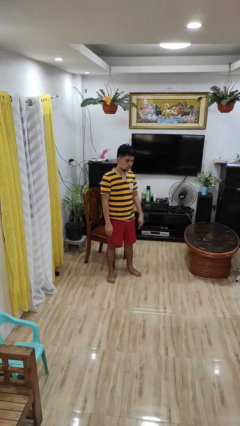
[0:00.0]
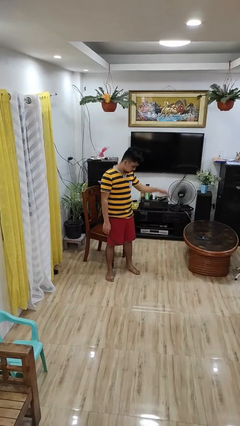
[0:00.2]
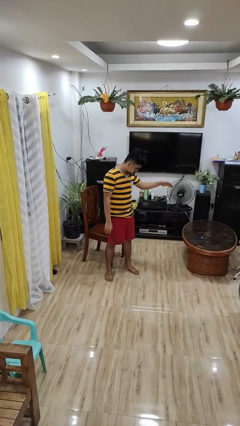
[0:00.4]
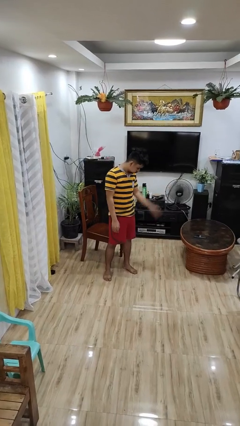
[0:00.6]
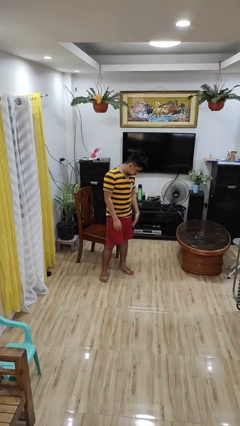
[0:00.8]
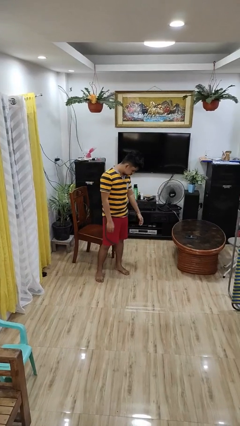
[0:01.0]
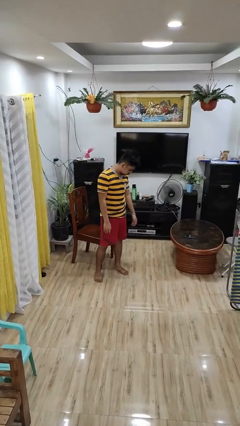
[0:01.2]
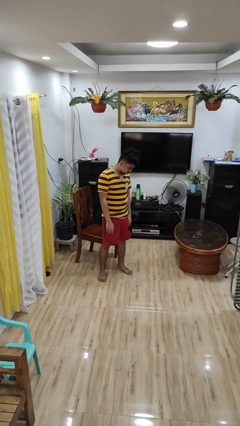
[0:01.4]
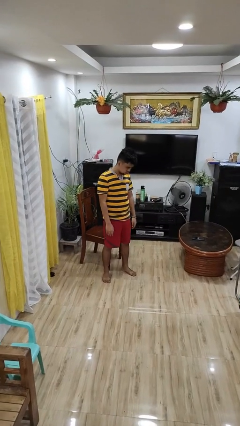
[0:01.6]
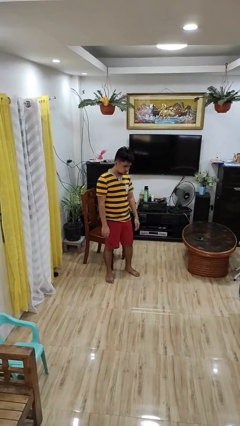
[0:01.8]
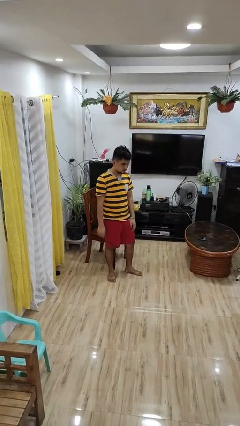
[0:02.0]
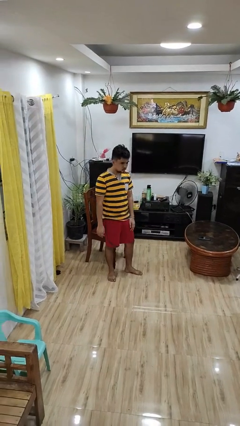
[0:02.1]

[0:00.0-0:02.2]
person slaps hands on thighs

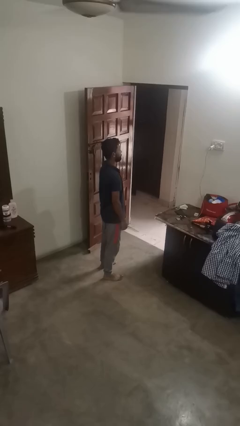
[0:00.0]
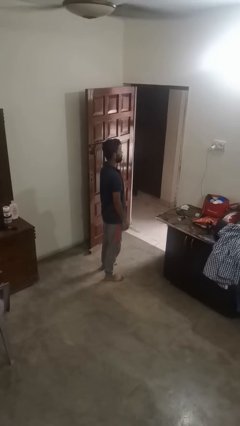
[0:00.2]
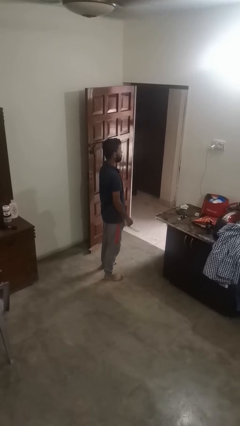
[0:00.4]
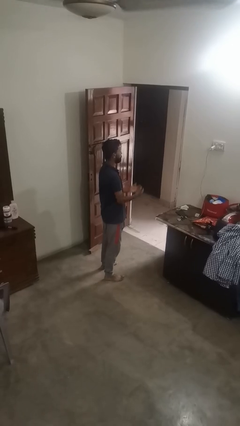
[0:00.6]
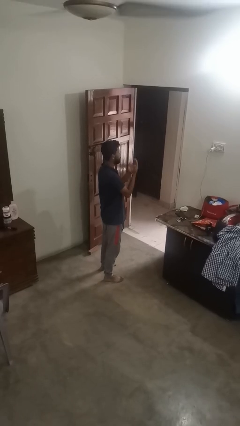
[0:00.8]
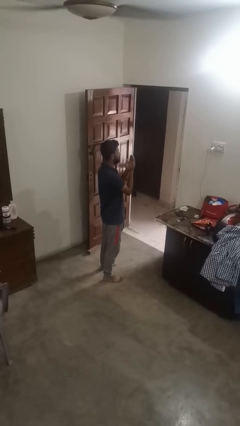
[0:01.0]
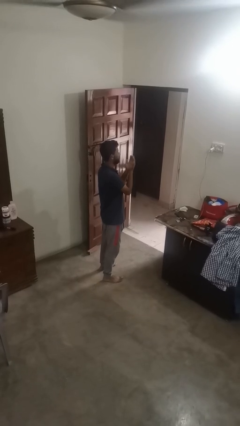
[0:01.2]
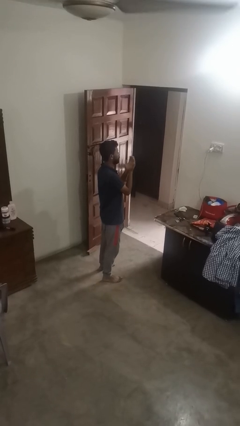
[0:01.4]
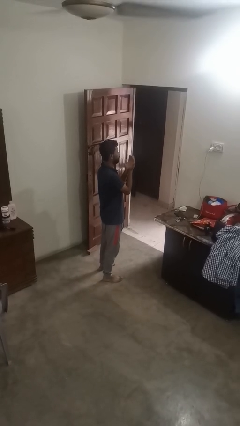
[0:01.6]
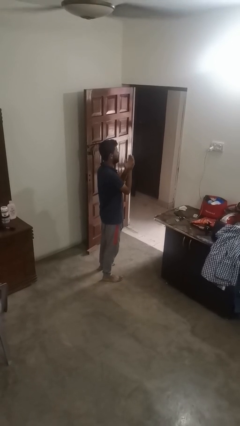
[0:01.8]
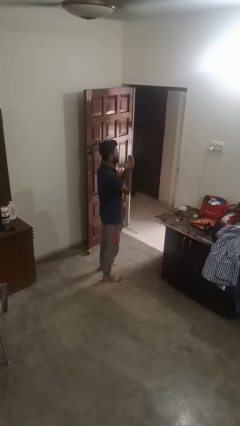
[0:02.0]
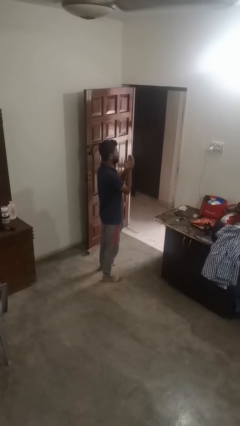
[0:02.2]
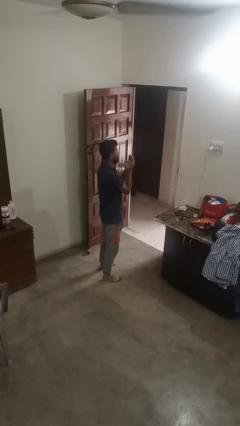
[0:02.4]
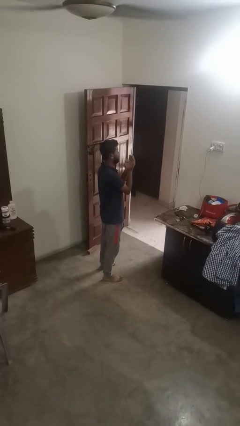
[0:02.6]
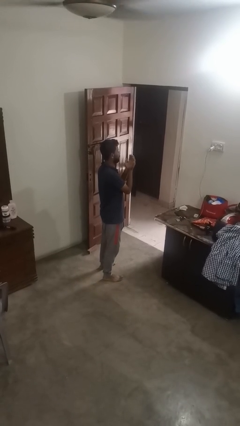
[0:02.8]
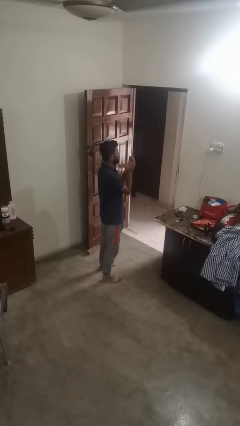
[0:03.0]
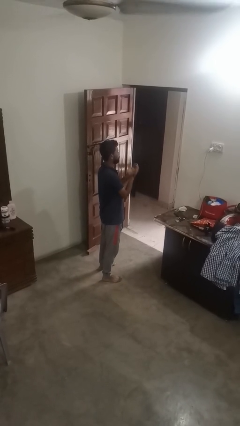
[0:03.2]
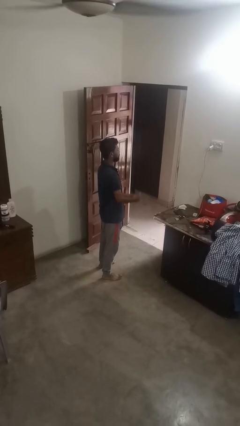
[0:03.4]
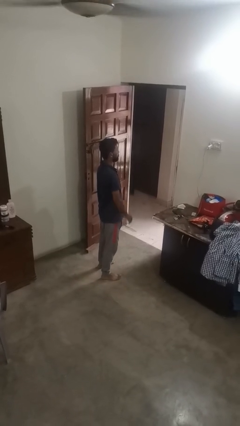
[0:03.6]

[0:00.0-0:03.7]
person prays

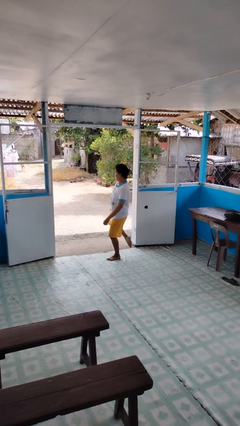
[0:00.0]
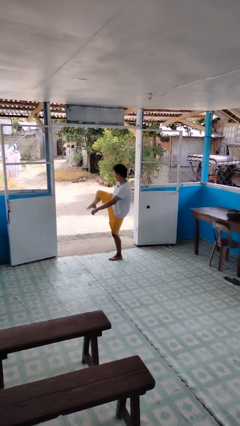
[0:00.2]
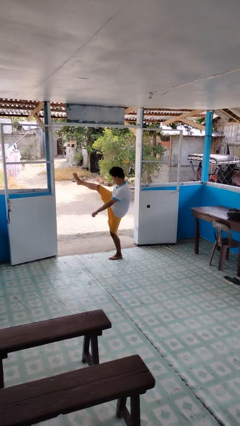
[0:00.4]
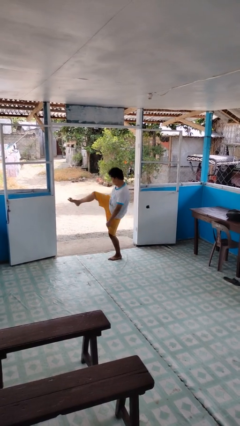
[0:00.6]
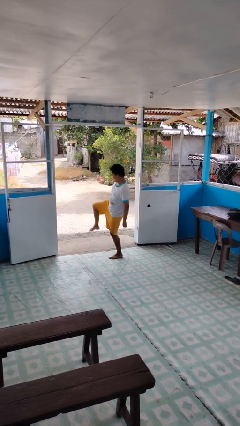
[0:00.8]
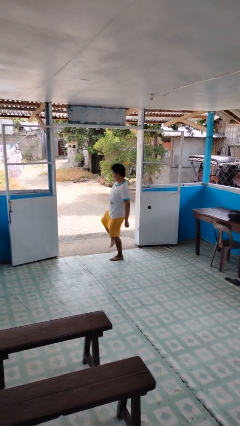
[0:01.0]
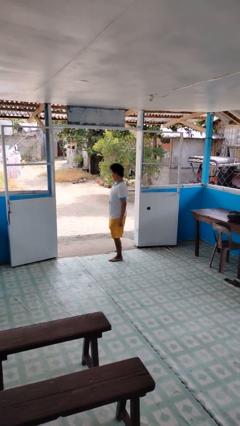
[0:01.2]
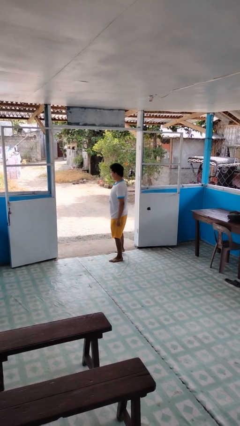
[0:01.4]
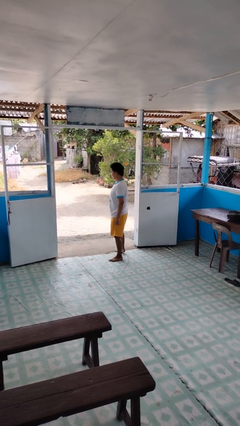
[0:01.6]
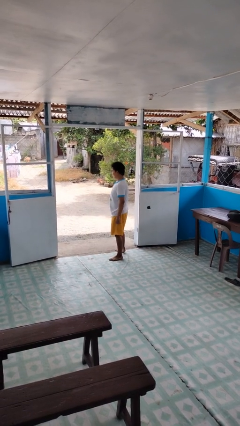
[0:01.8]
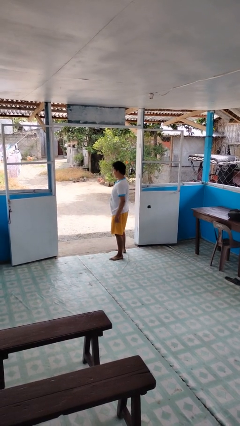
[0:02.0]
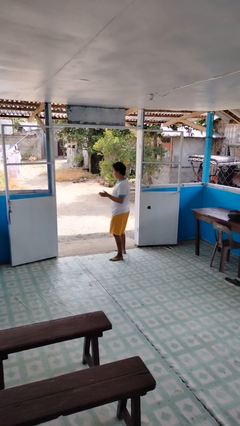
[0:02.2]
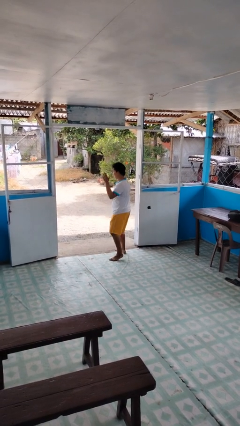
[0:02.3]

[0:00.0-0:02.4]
person karate kicks

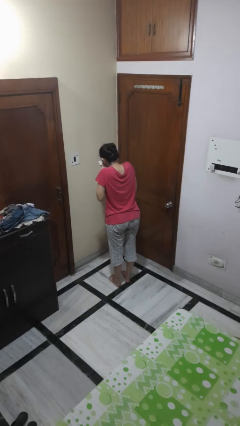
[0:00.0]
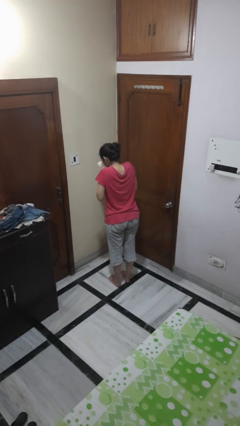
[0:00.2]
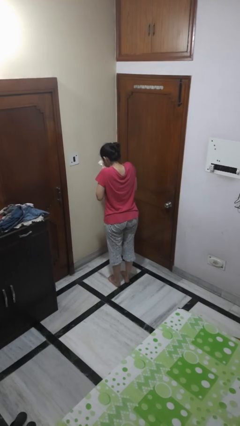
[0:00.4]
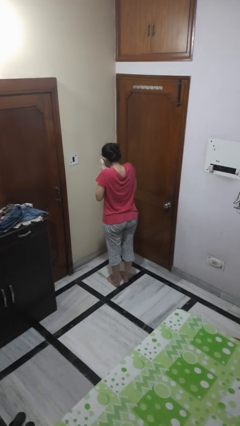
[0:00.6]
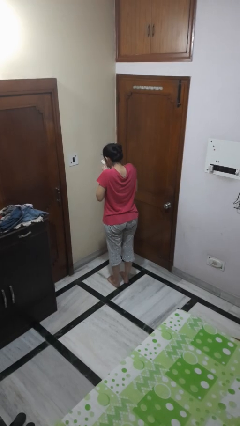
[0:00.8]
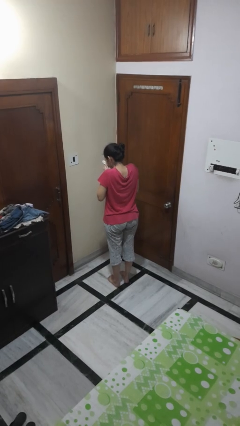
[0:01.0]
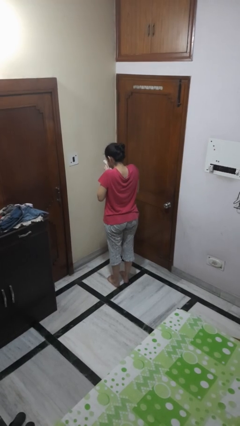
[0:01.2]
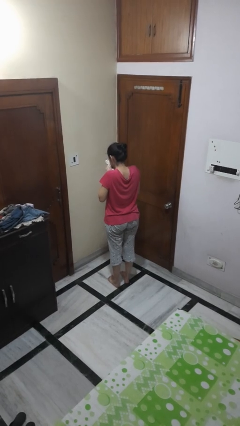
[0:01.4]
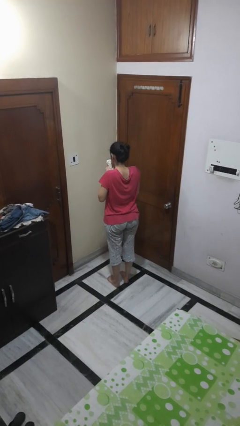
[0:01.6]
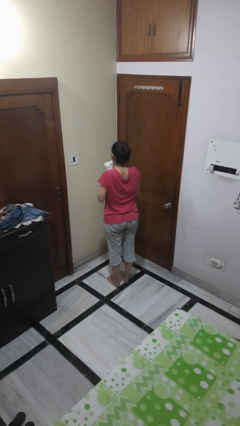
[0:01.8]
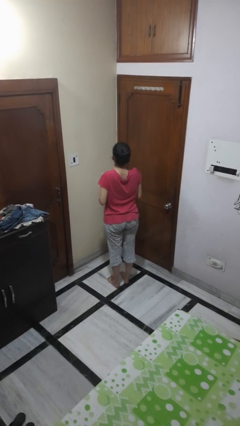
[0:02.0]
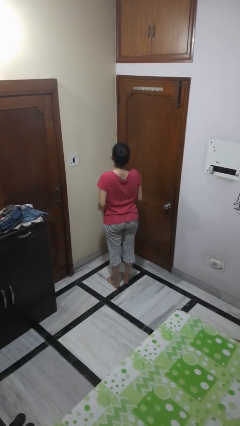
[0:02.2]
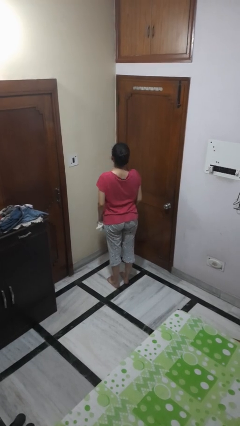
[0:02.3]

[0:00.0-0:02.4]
person blows nose

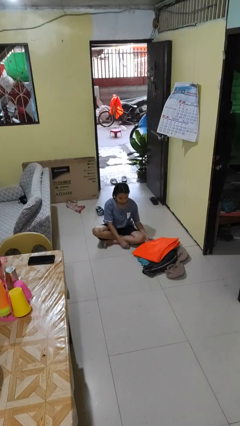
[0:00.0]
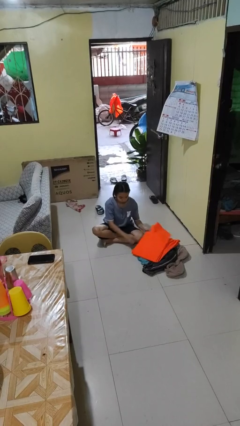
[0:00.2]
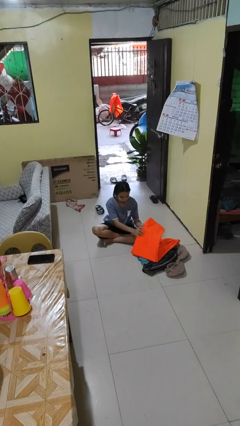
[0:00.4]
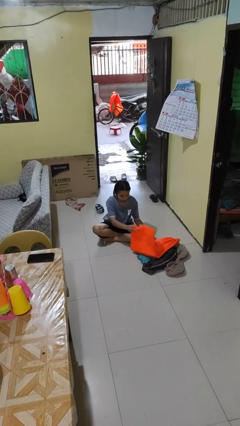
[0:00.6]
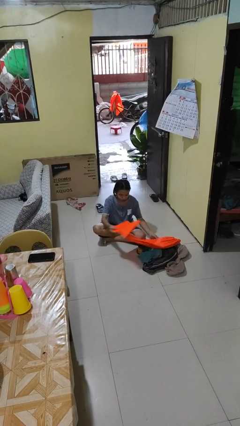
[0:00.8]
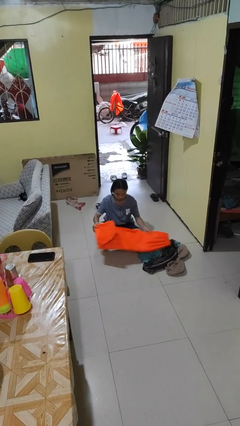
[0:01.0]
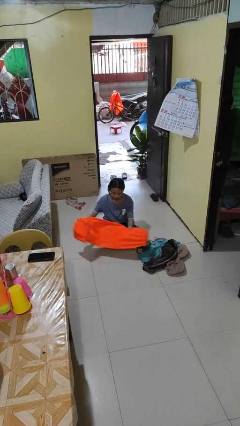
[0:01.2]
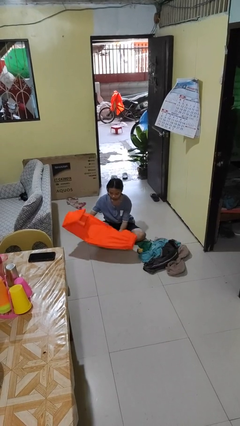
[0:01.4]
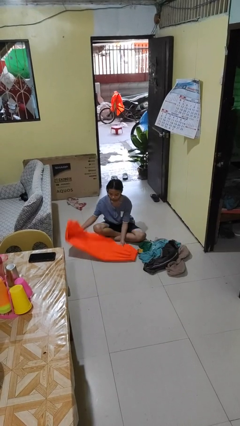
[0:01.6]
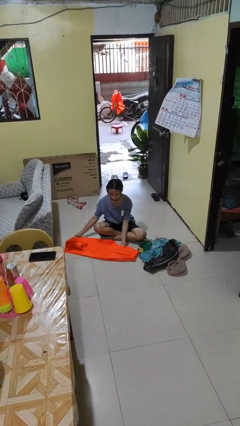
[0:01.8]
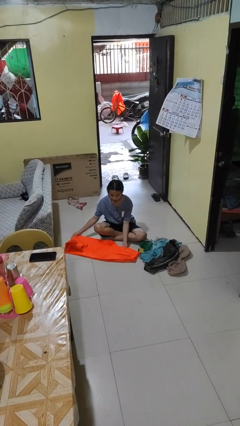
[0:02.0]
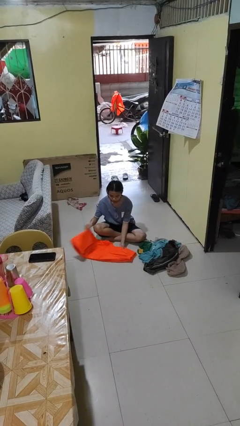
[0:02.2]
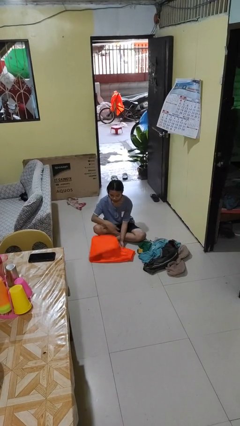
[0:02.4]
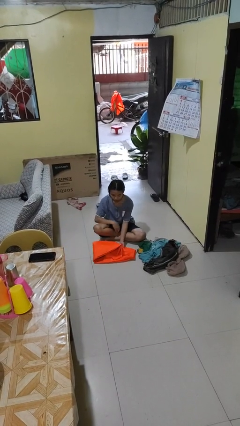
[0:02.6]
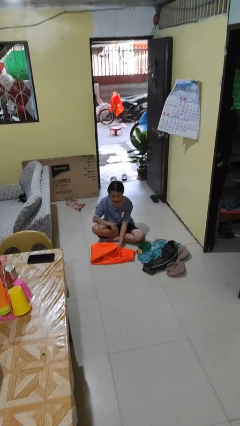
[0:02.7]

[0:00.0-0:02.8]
person folds pants

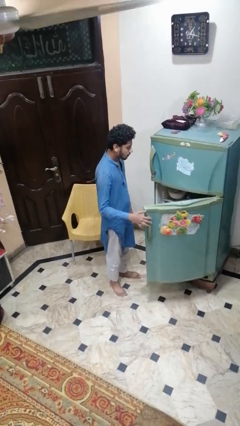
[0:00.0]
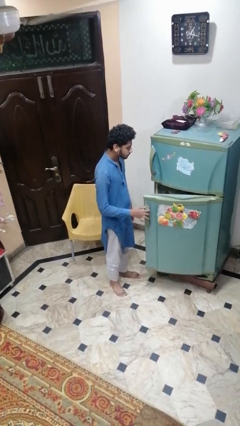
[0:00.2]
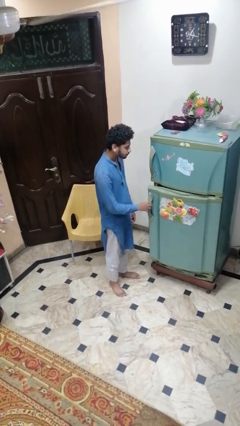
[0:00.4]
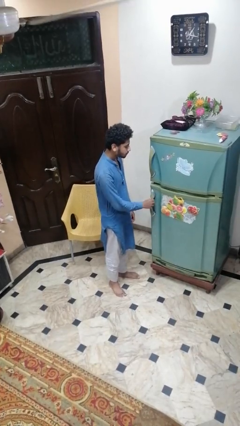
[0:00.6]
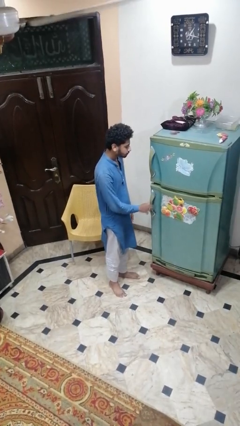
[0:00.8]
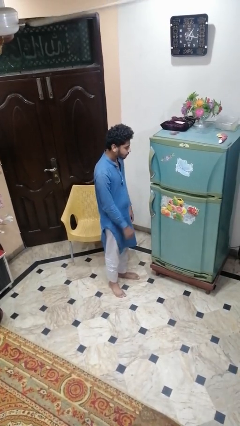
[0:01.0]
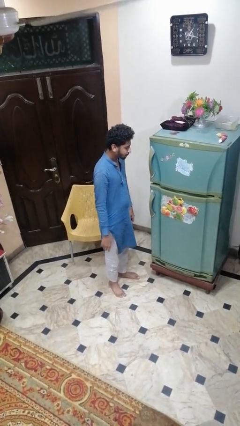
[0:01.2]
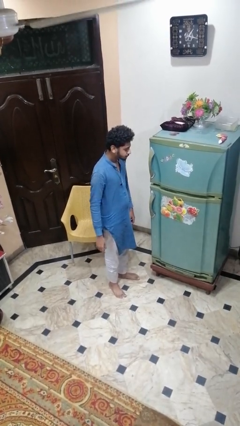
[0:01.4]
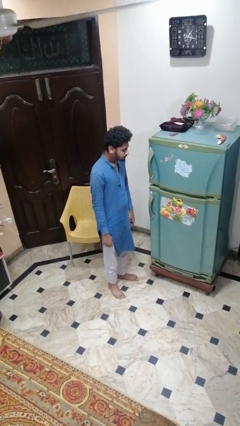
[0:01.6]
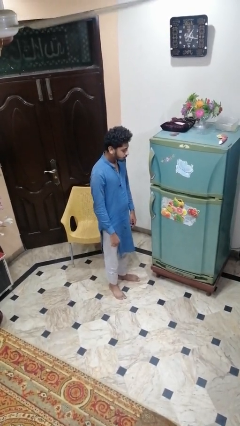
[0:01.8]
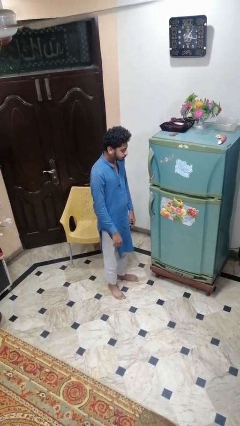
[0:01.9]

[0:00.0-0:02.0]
person closes refrigerator

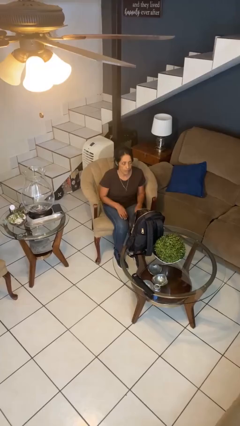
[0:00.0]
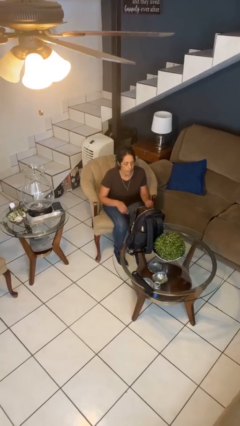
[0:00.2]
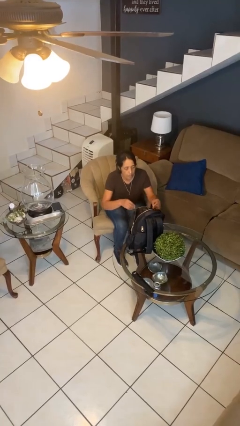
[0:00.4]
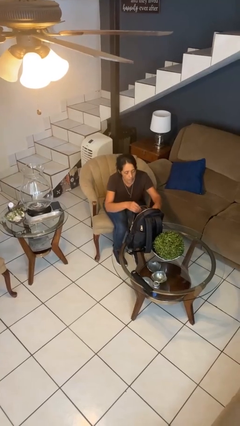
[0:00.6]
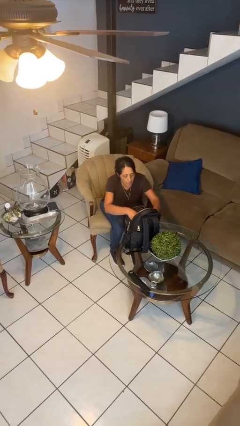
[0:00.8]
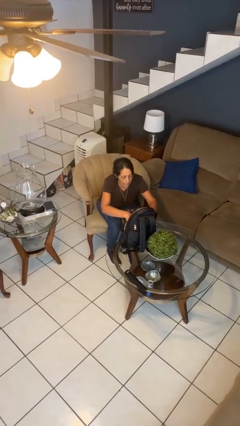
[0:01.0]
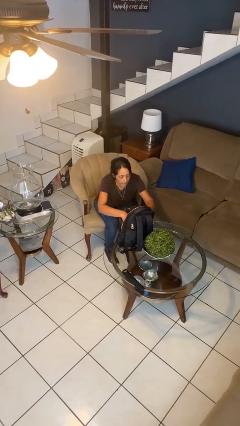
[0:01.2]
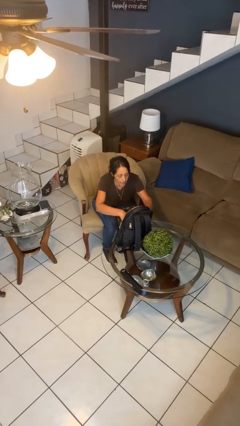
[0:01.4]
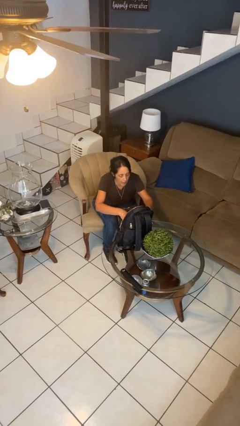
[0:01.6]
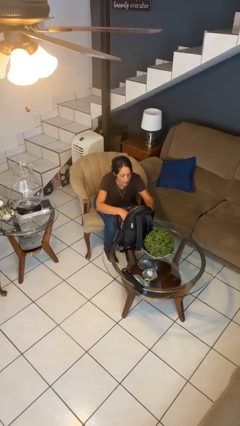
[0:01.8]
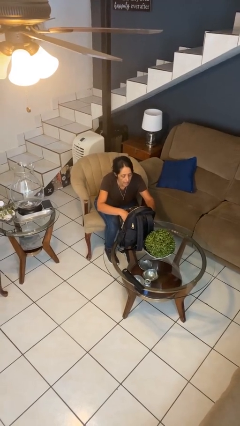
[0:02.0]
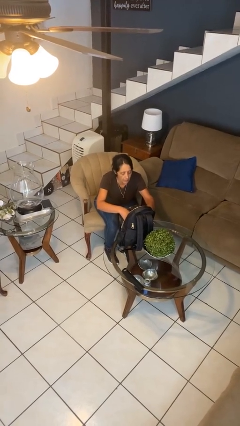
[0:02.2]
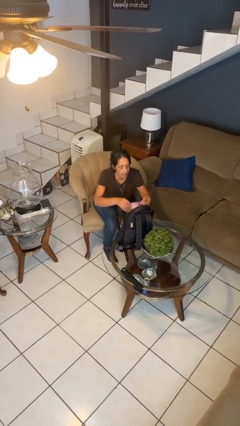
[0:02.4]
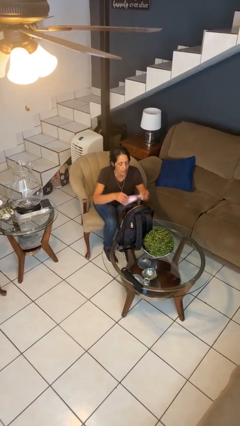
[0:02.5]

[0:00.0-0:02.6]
person searches in backpack
